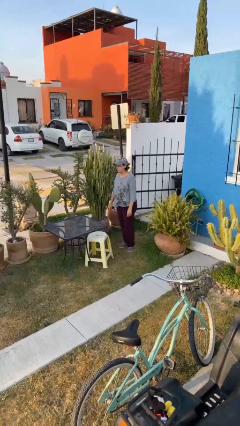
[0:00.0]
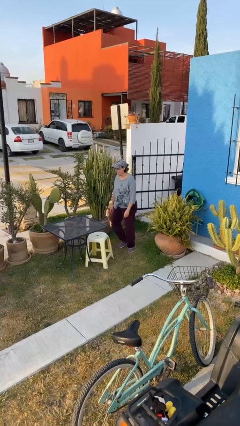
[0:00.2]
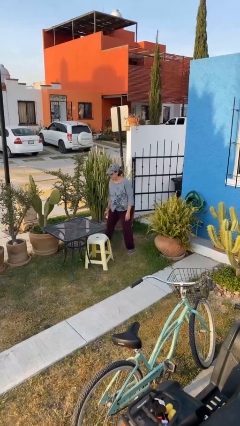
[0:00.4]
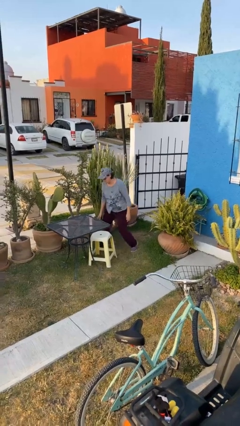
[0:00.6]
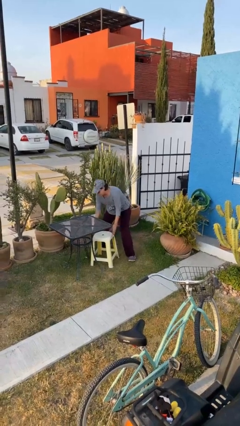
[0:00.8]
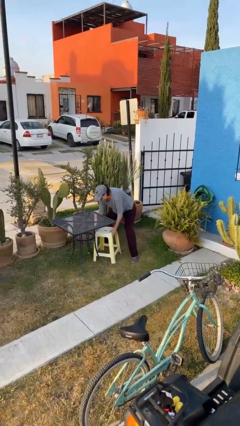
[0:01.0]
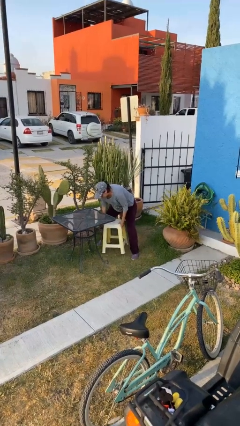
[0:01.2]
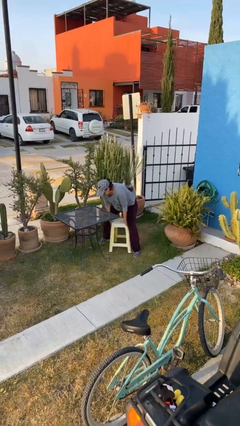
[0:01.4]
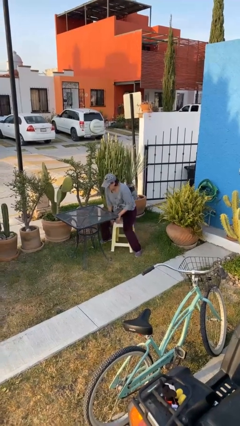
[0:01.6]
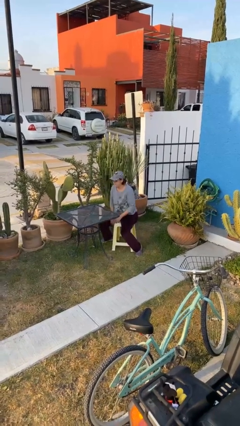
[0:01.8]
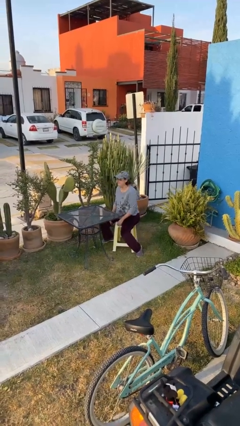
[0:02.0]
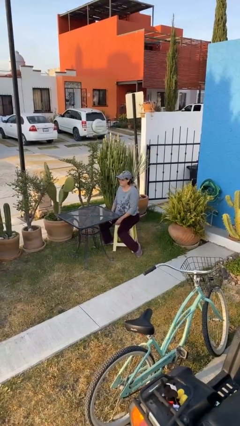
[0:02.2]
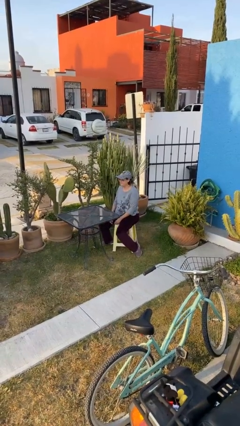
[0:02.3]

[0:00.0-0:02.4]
person sits down

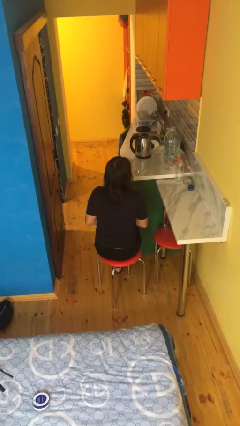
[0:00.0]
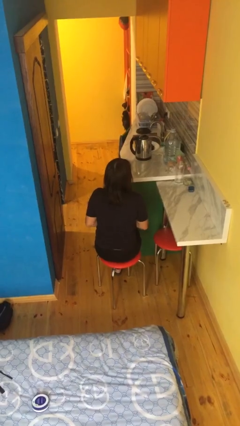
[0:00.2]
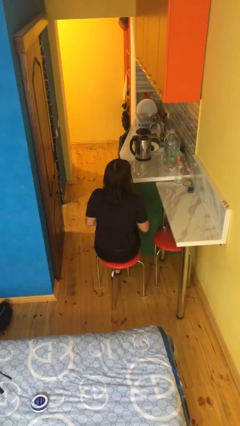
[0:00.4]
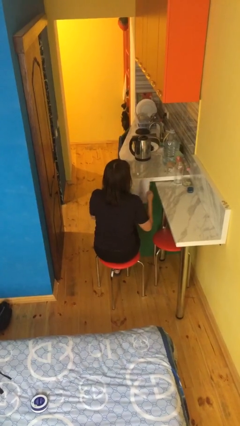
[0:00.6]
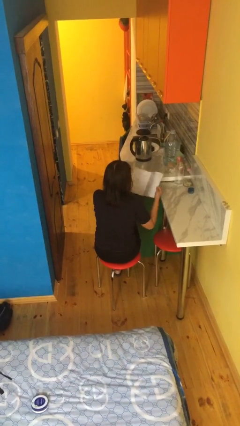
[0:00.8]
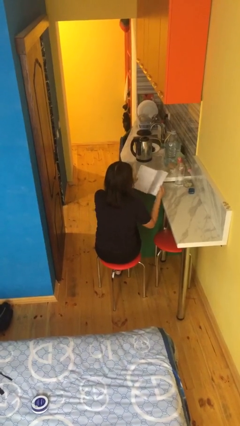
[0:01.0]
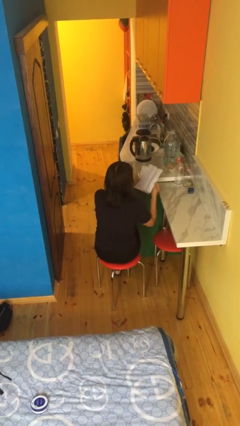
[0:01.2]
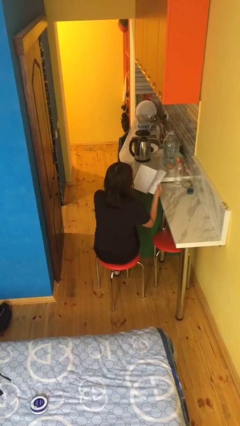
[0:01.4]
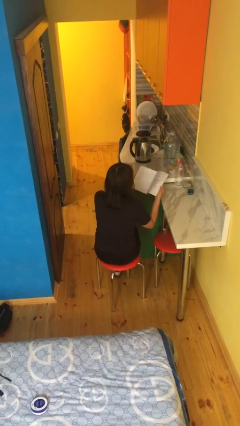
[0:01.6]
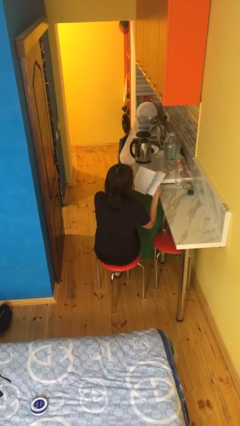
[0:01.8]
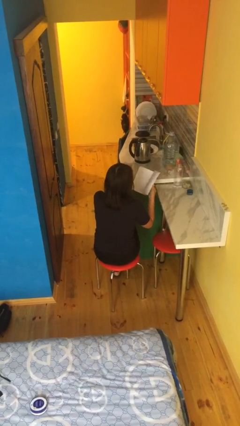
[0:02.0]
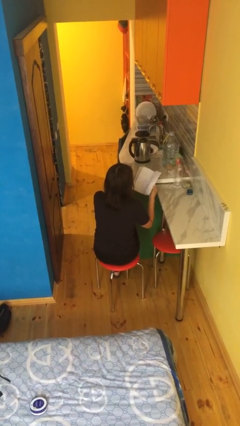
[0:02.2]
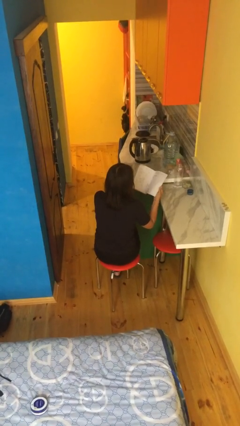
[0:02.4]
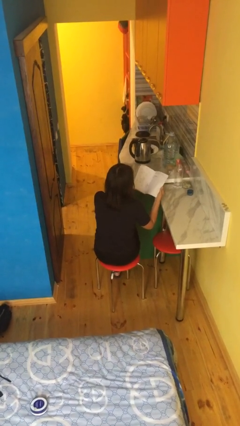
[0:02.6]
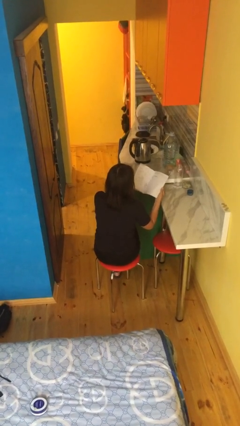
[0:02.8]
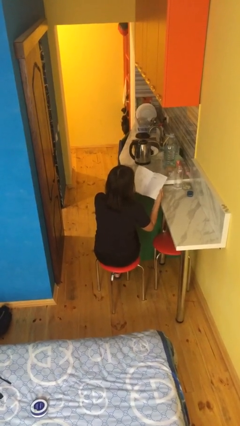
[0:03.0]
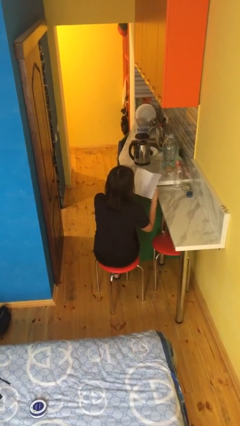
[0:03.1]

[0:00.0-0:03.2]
person reads book

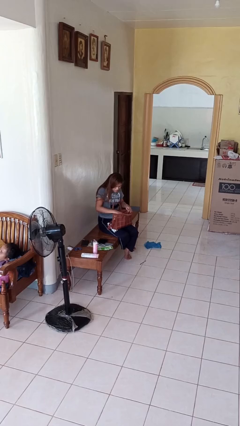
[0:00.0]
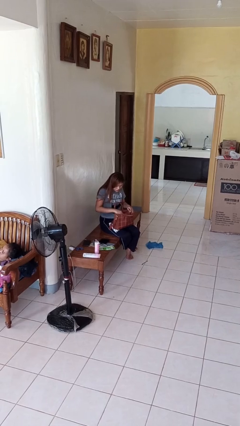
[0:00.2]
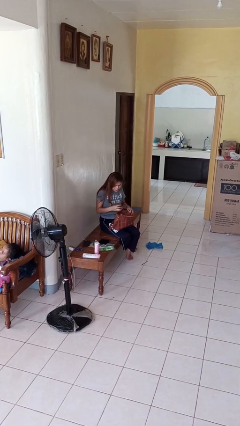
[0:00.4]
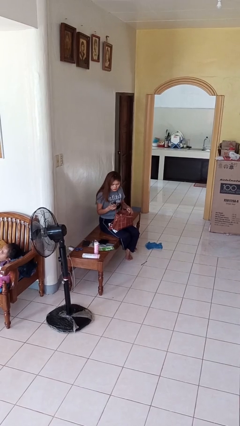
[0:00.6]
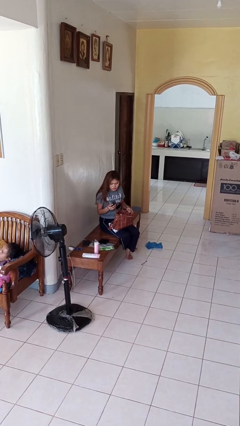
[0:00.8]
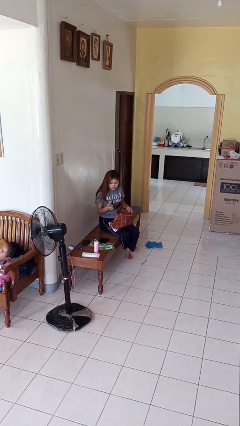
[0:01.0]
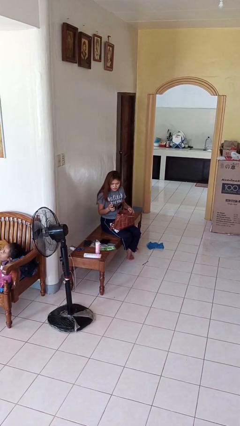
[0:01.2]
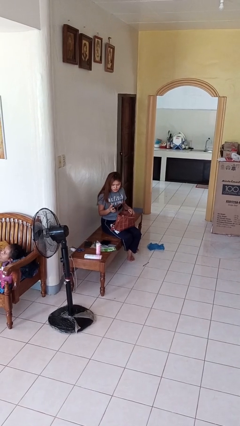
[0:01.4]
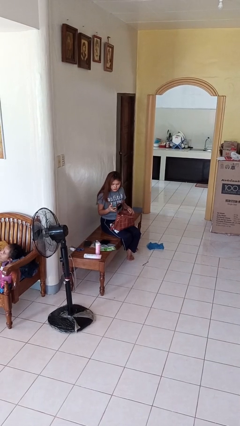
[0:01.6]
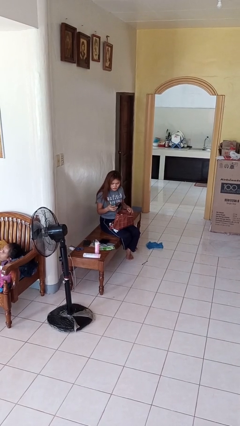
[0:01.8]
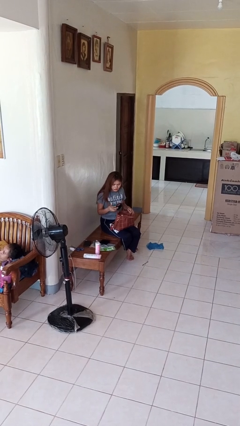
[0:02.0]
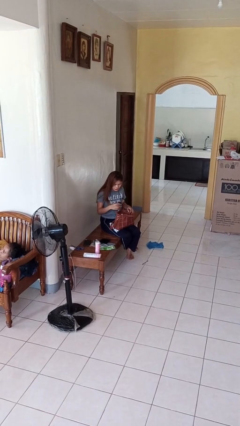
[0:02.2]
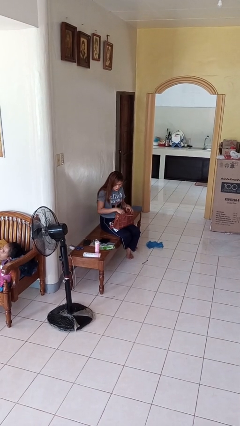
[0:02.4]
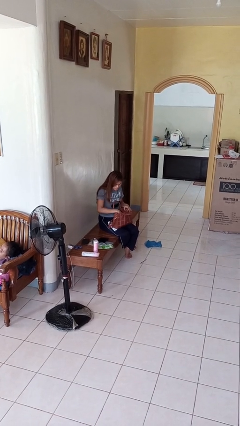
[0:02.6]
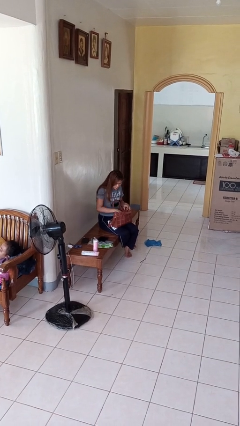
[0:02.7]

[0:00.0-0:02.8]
person takes object from purse

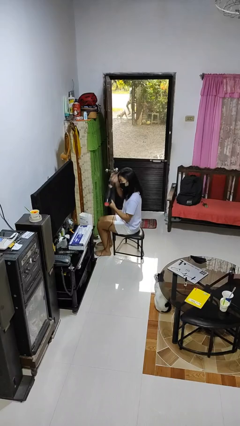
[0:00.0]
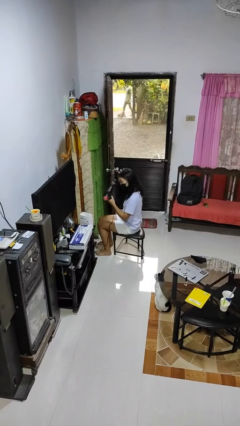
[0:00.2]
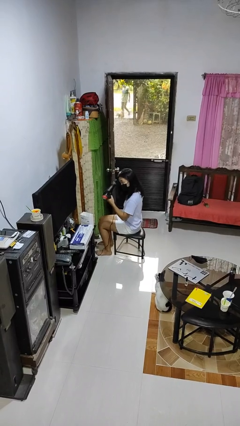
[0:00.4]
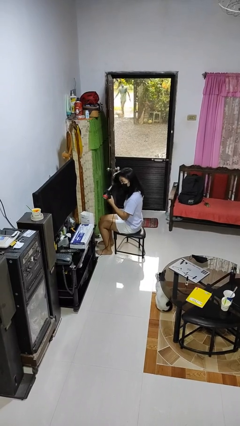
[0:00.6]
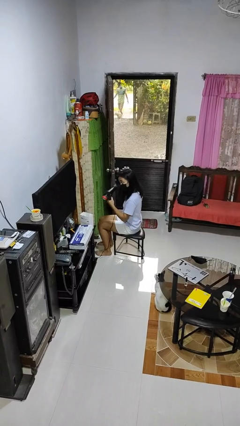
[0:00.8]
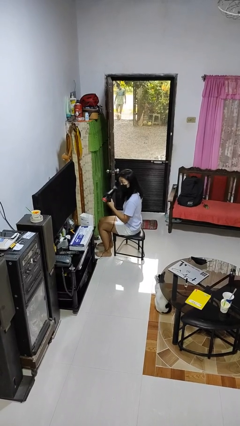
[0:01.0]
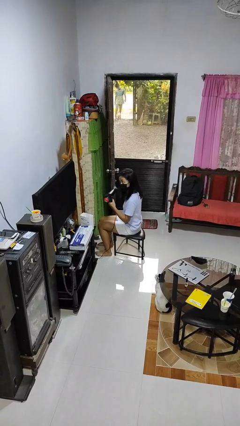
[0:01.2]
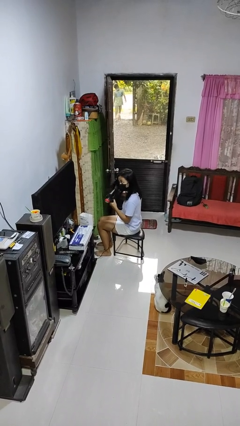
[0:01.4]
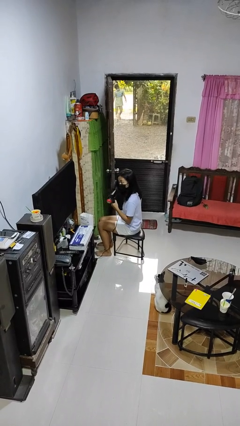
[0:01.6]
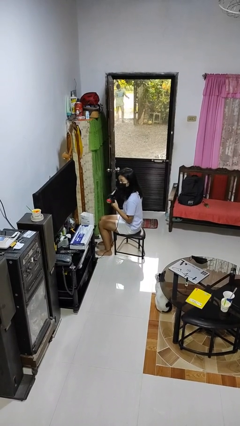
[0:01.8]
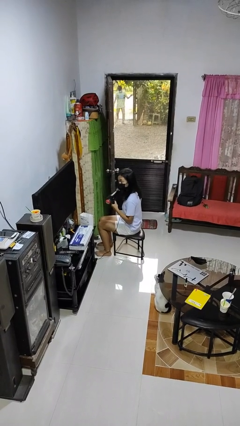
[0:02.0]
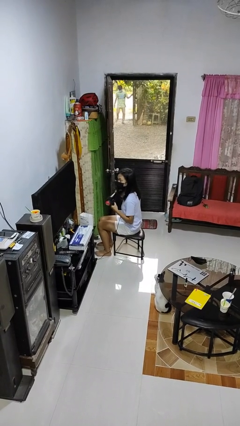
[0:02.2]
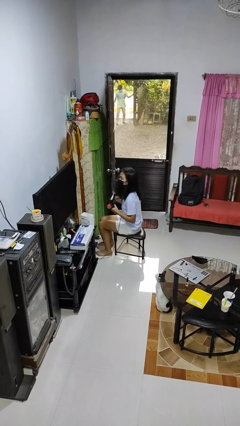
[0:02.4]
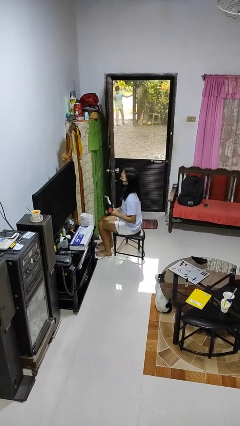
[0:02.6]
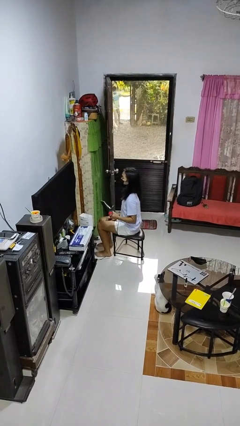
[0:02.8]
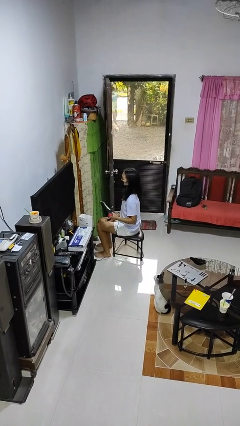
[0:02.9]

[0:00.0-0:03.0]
person dries hair with hairdryer

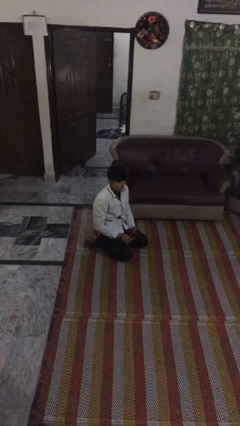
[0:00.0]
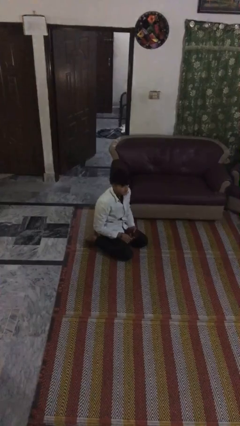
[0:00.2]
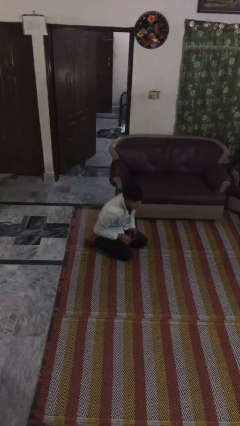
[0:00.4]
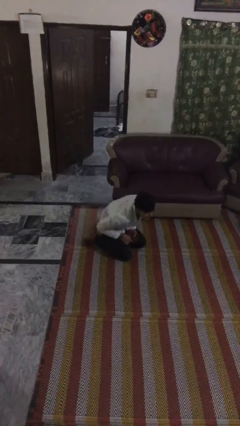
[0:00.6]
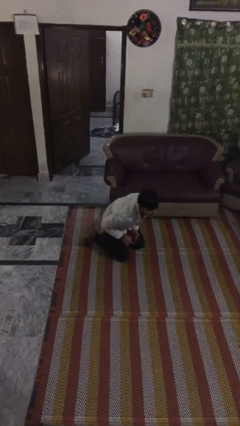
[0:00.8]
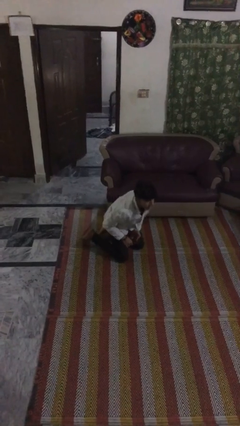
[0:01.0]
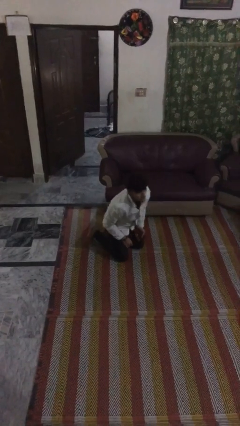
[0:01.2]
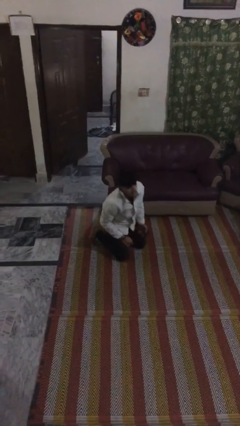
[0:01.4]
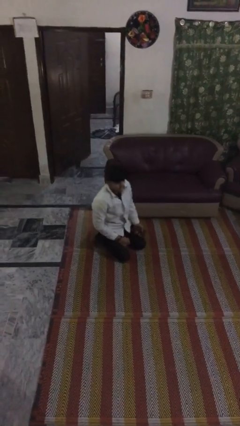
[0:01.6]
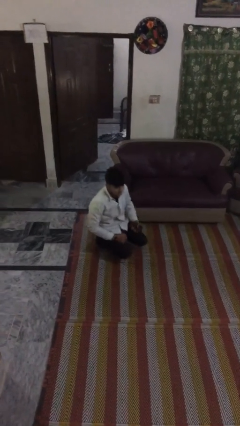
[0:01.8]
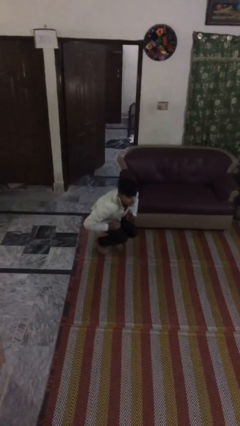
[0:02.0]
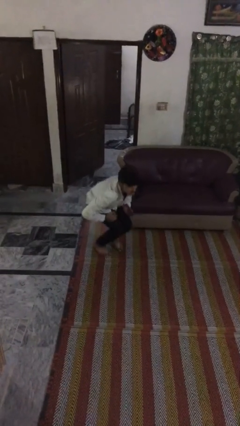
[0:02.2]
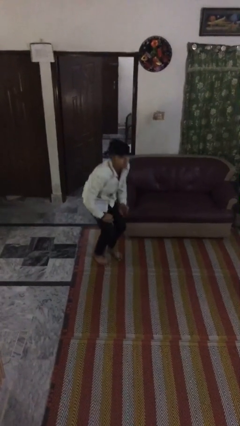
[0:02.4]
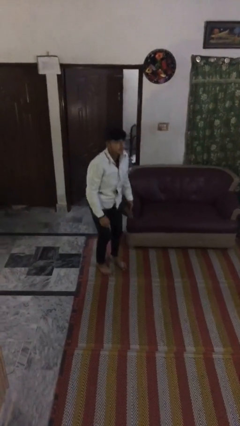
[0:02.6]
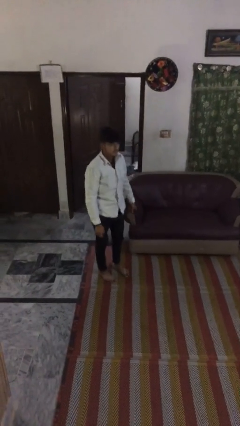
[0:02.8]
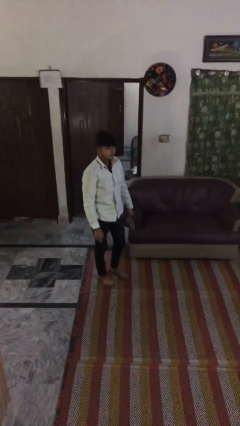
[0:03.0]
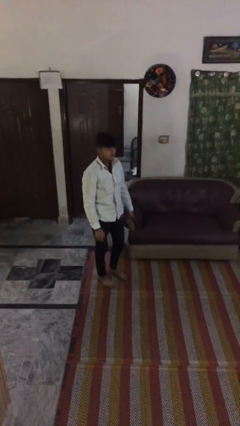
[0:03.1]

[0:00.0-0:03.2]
person stands up

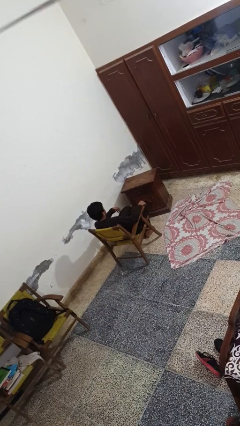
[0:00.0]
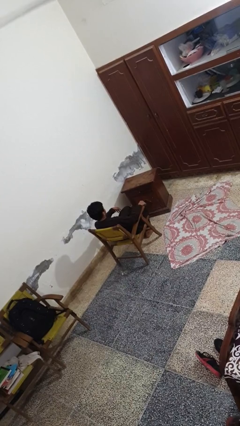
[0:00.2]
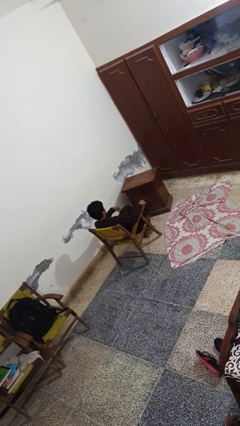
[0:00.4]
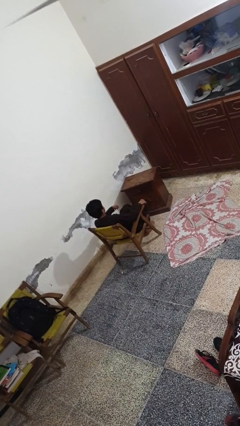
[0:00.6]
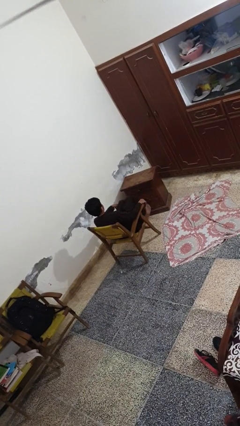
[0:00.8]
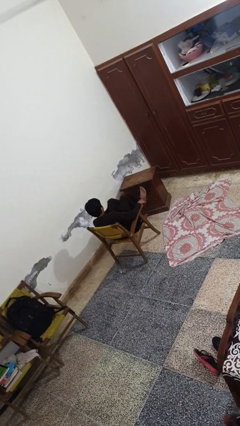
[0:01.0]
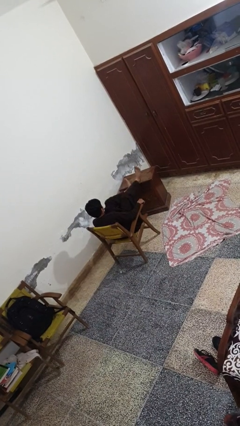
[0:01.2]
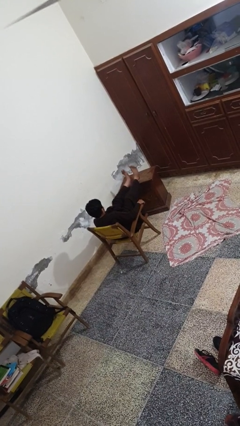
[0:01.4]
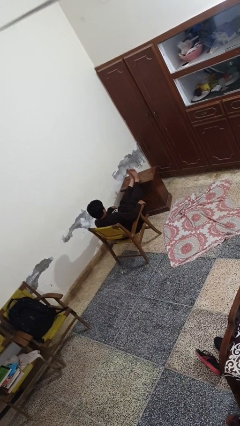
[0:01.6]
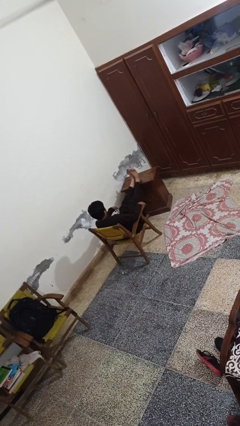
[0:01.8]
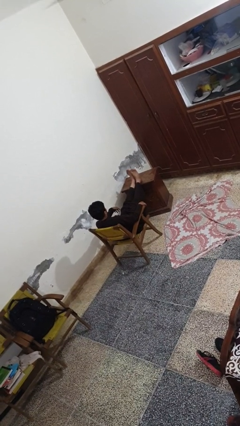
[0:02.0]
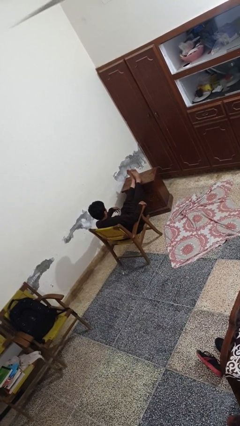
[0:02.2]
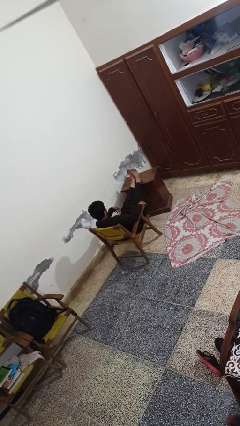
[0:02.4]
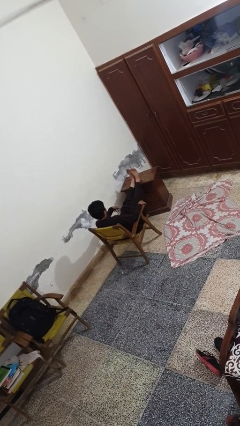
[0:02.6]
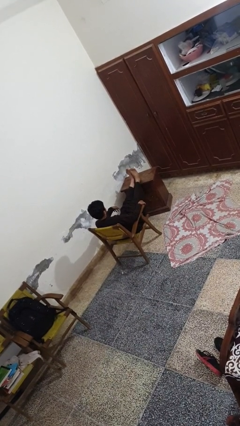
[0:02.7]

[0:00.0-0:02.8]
person puts feet up
